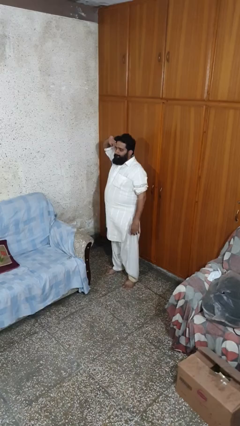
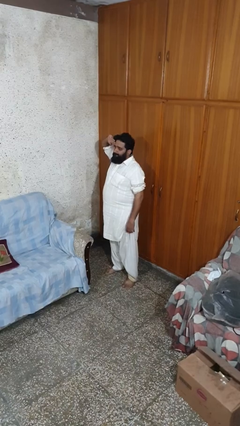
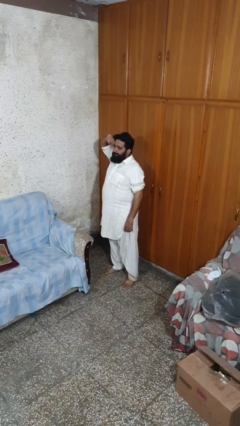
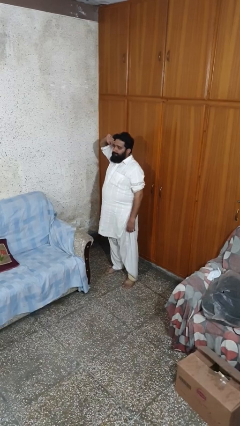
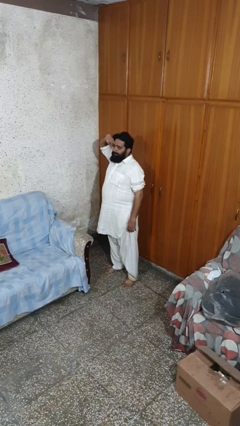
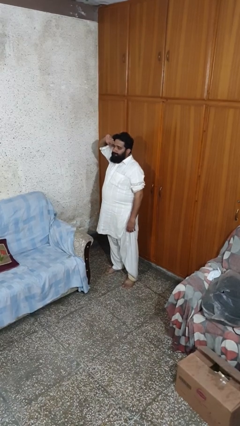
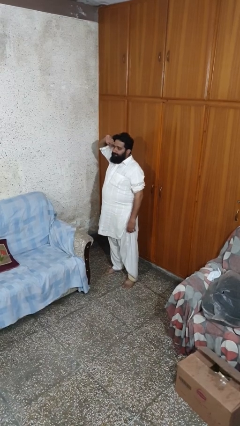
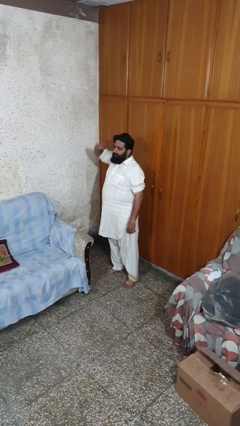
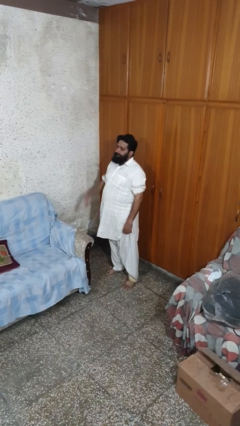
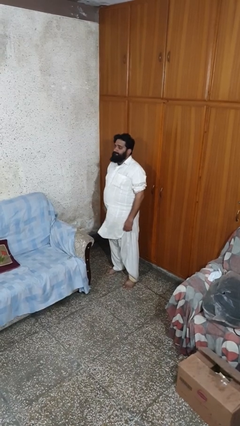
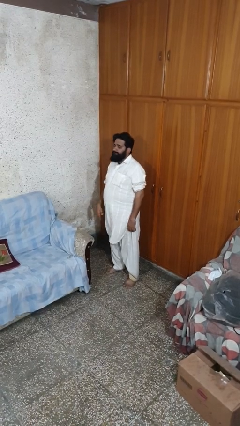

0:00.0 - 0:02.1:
person salutes

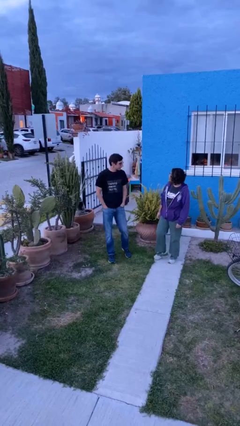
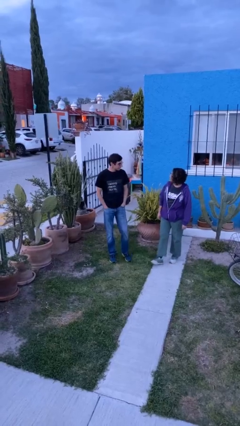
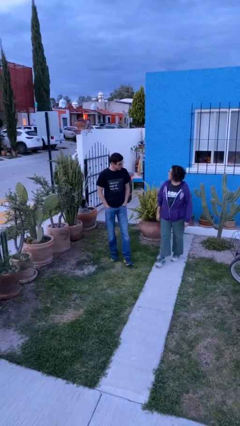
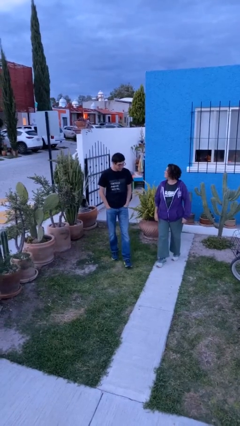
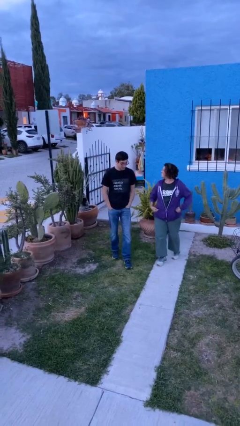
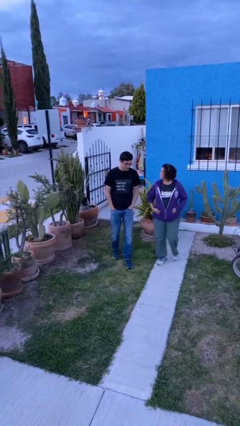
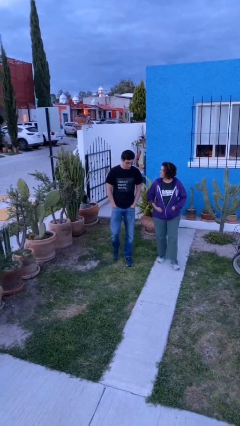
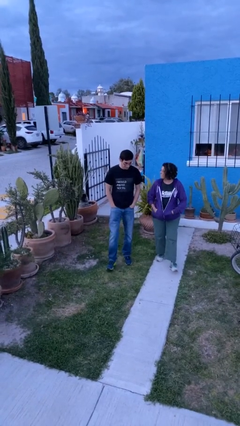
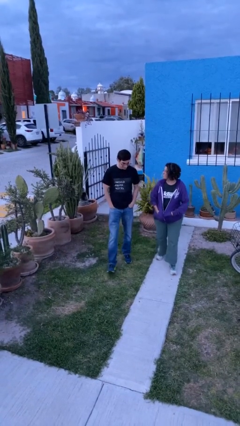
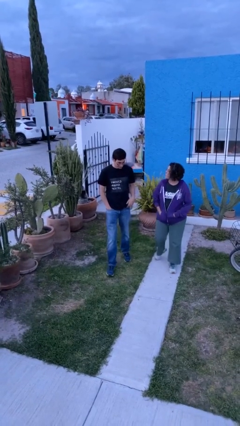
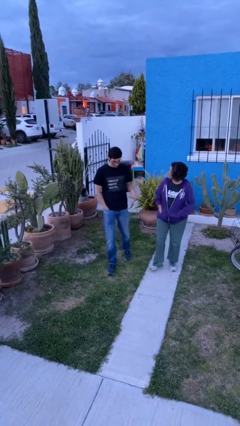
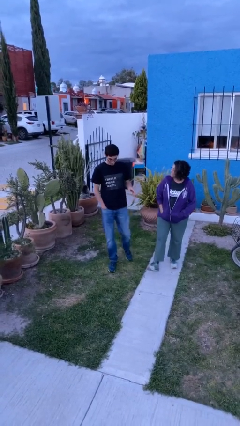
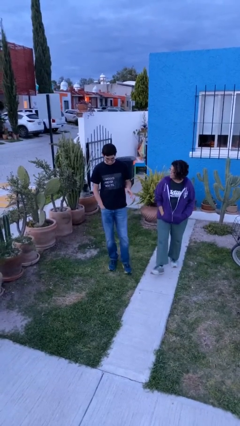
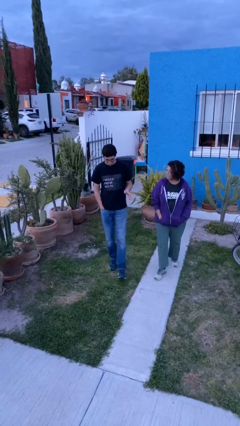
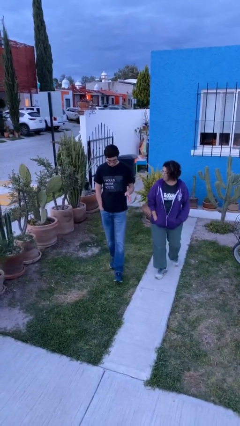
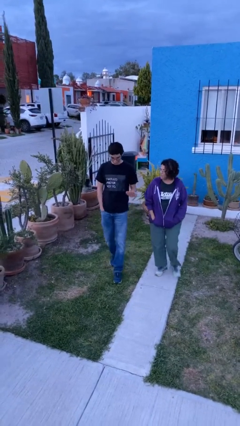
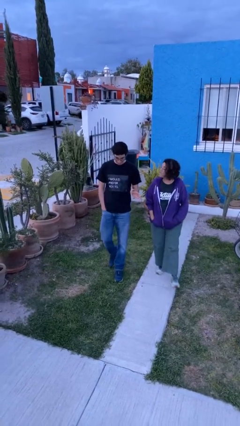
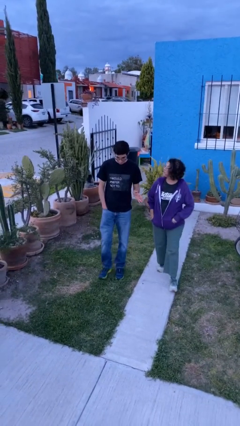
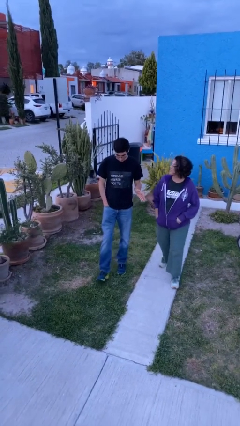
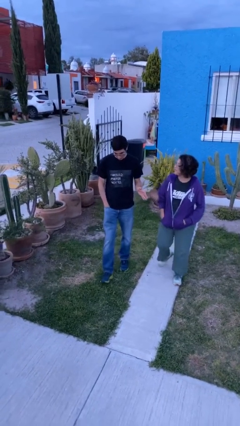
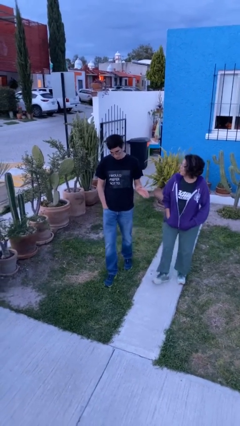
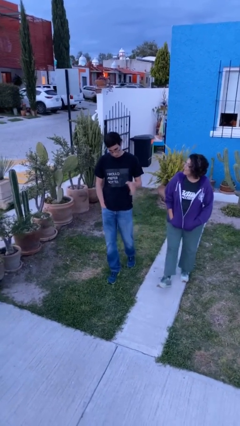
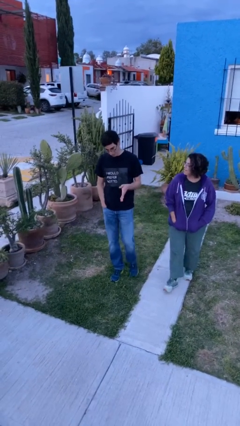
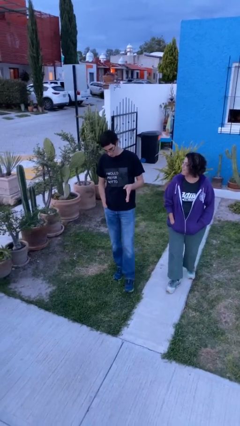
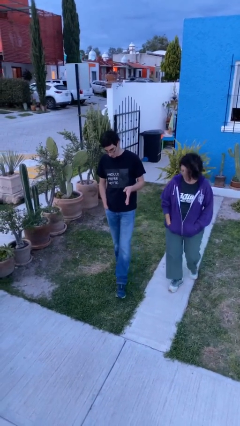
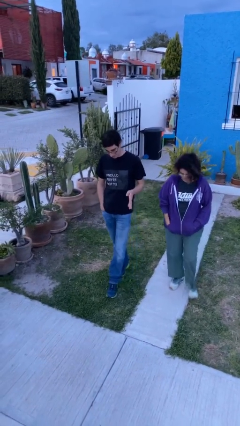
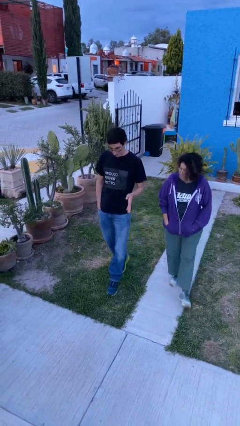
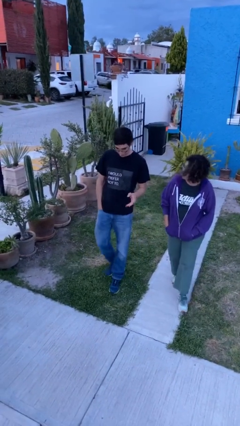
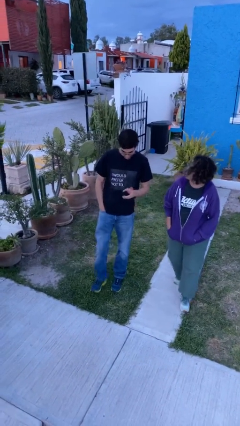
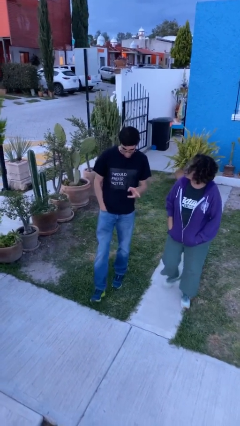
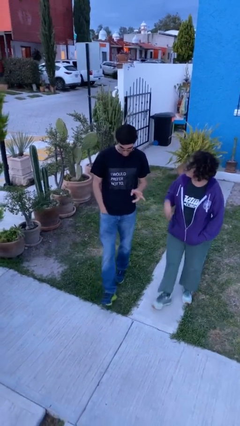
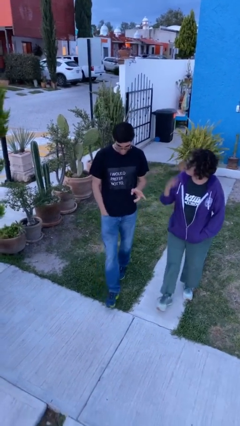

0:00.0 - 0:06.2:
person talks to person

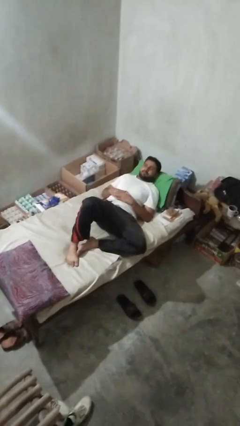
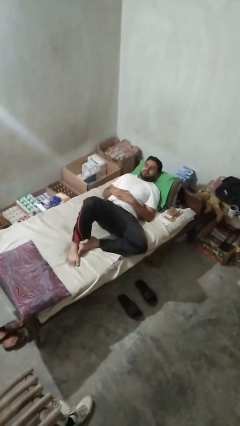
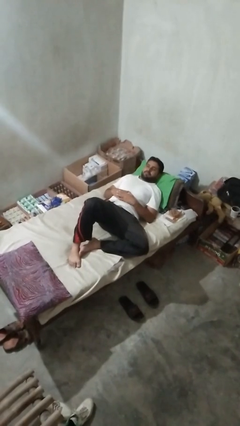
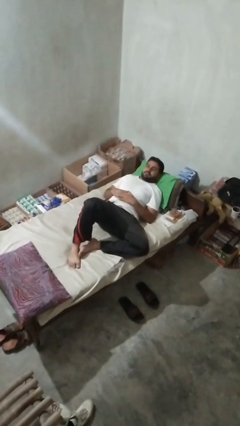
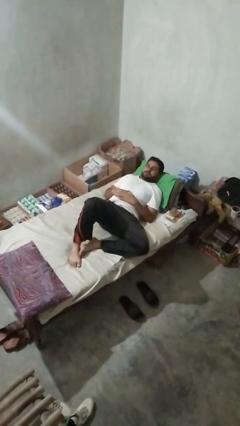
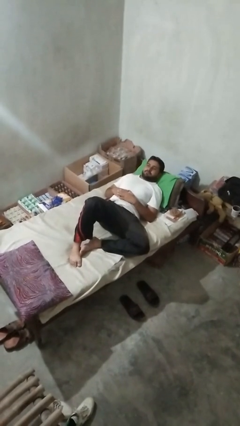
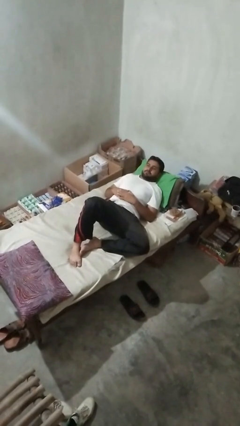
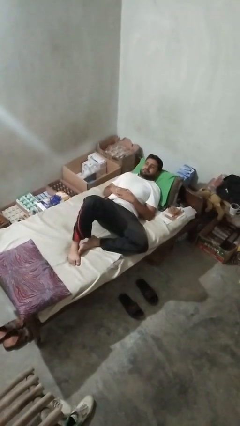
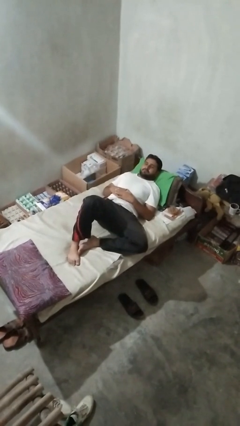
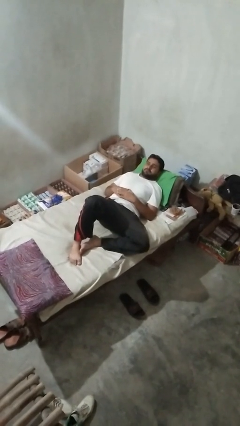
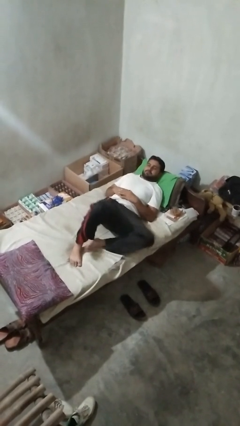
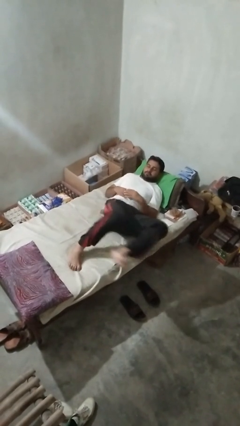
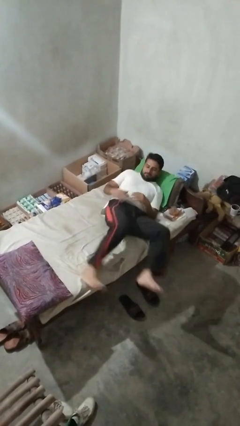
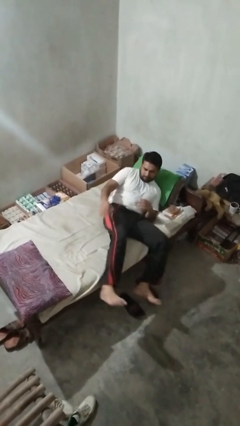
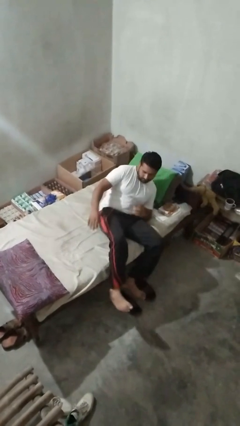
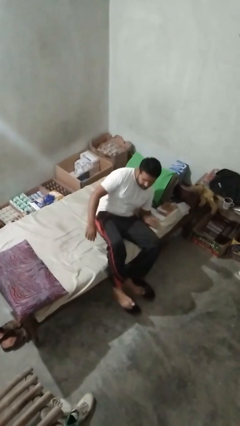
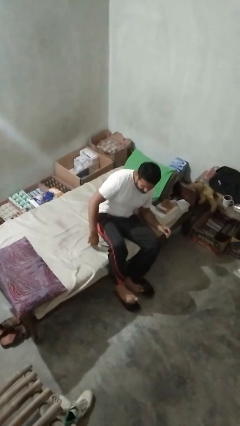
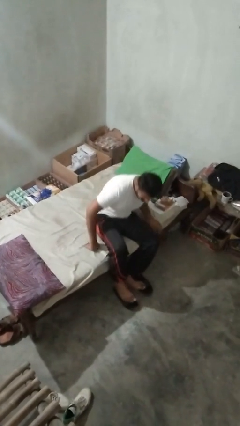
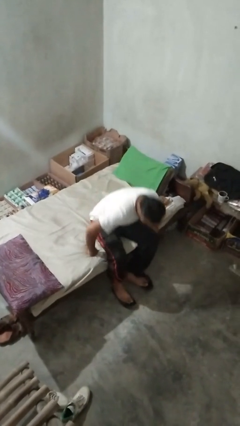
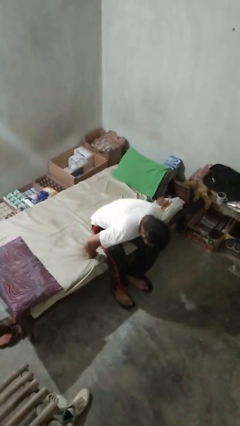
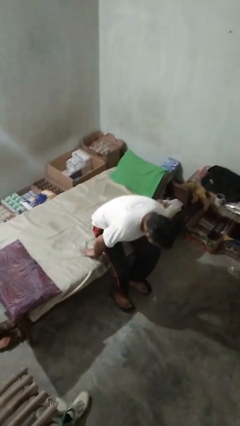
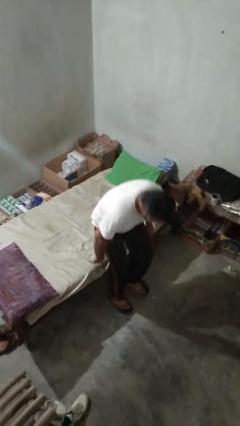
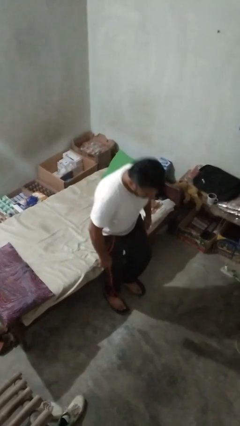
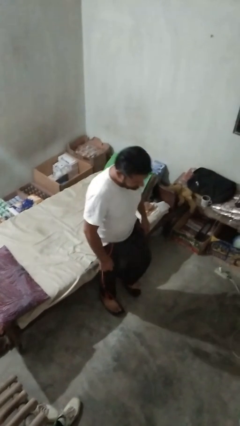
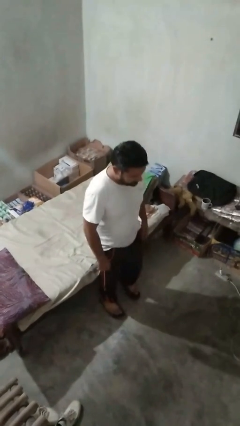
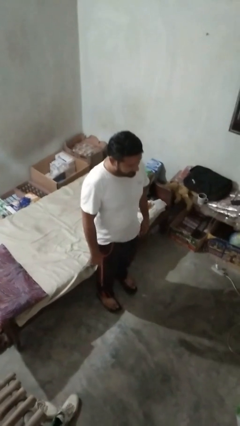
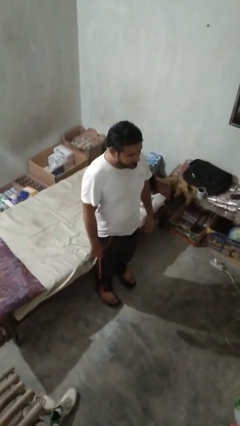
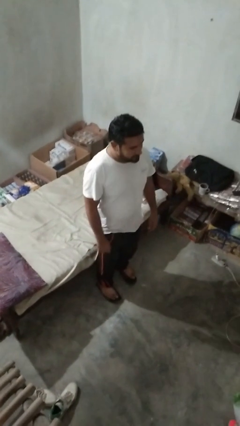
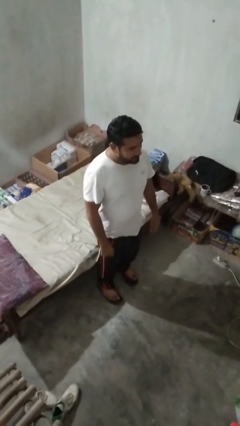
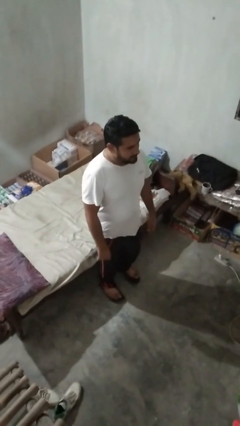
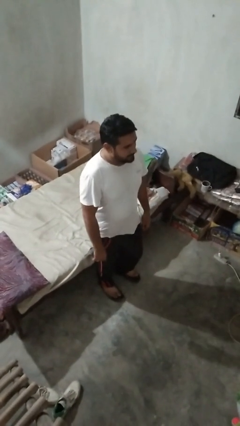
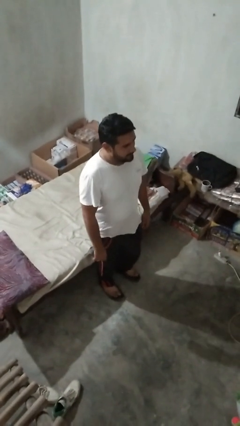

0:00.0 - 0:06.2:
person stands up

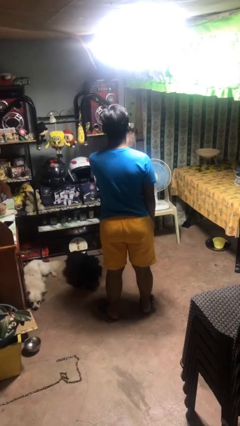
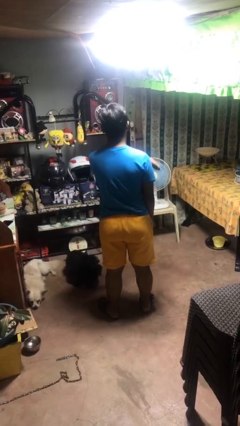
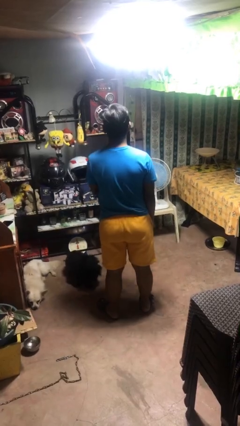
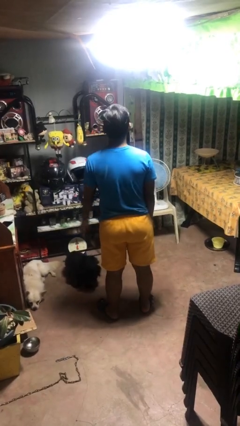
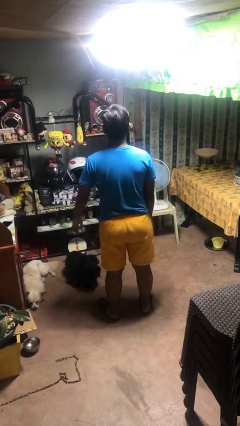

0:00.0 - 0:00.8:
person gestures swipe right

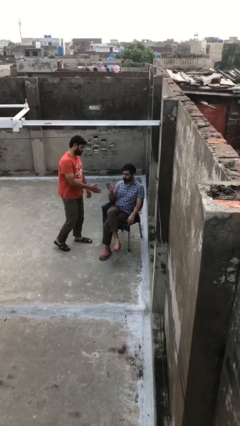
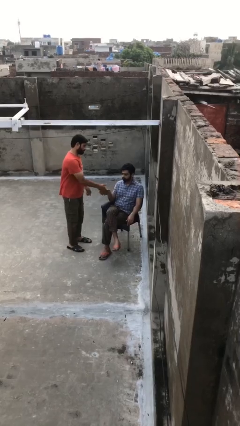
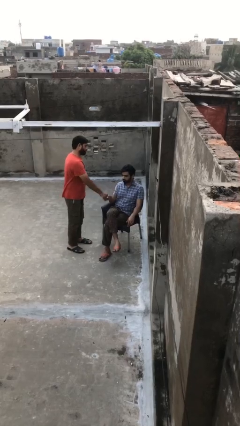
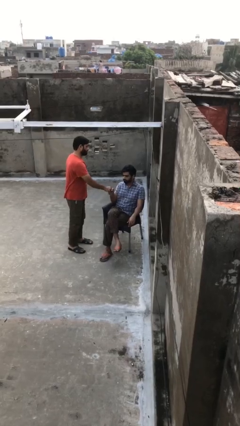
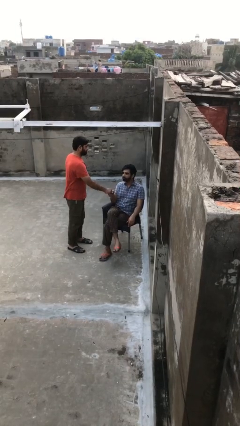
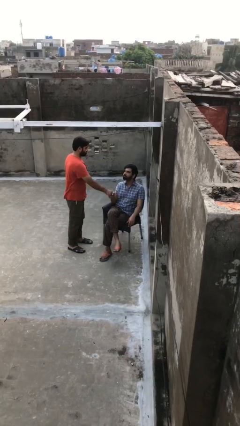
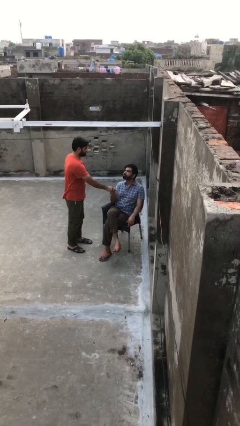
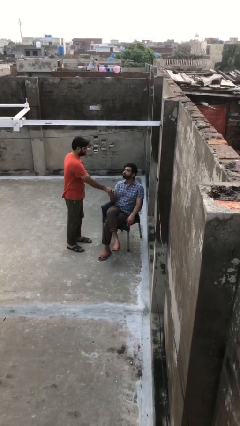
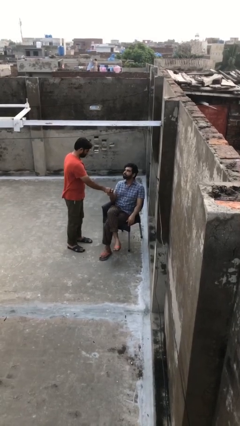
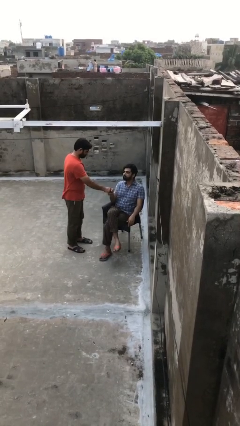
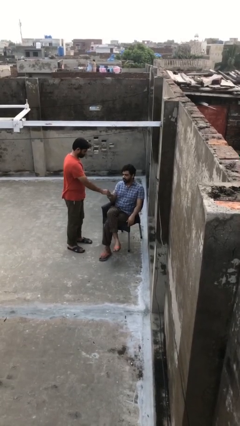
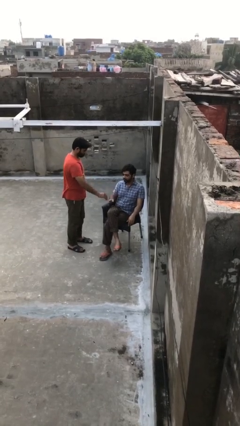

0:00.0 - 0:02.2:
person shakes hand

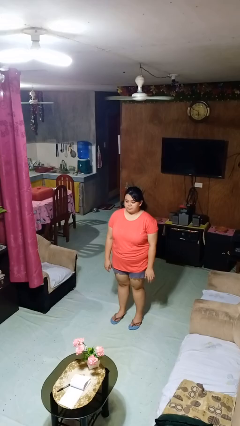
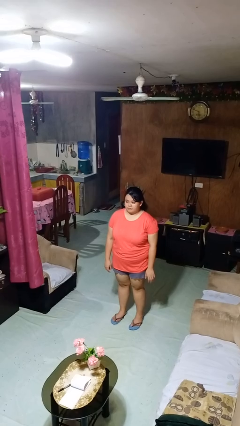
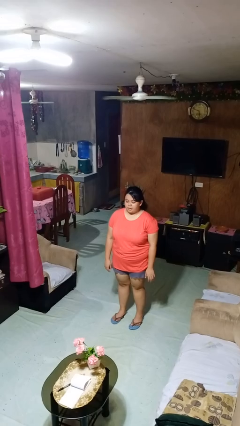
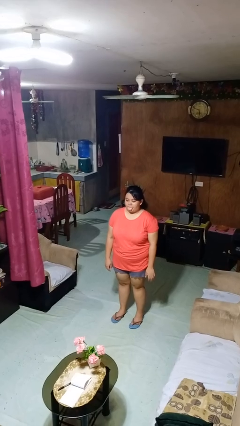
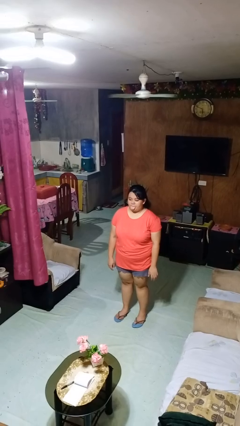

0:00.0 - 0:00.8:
person sticks out tongue
